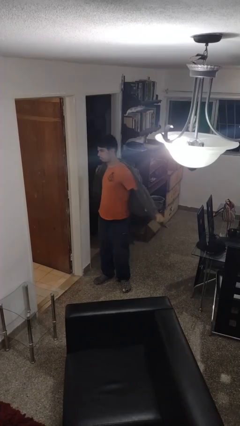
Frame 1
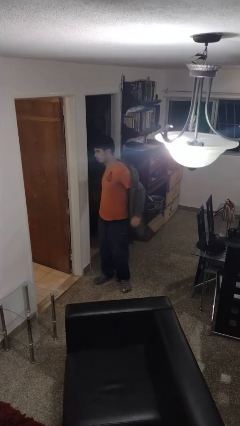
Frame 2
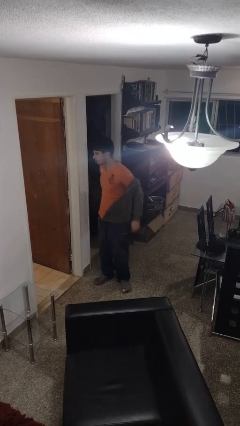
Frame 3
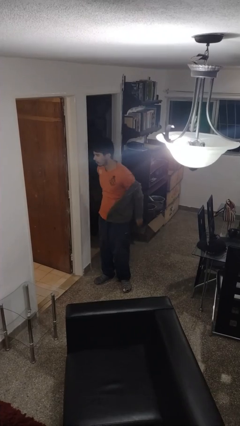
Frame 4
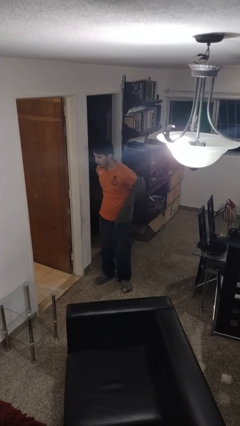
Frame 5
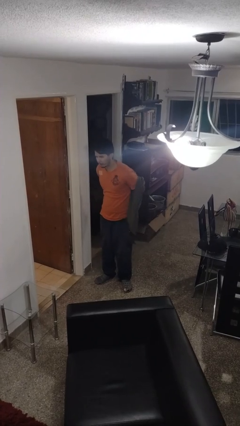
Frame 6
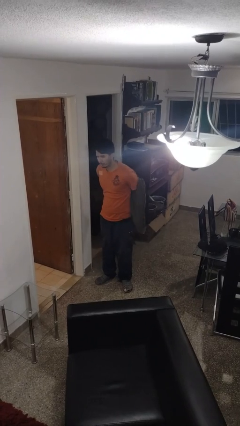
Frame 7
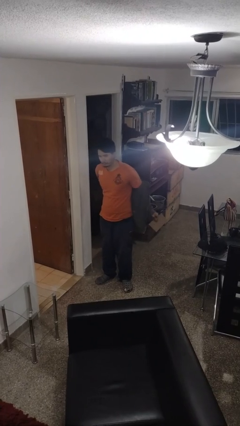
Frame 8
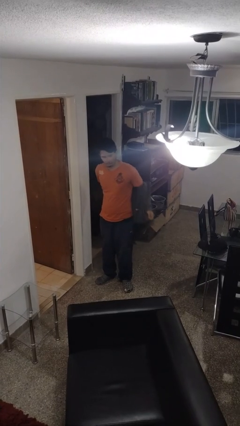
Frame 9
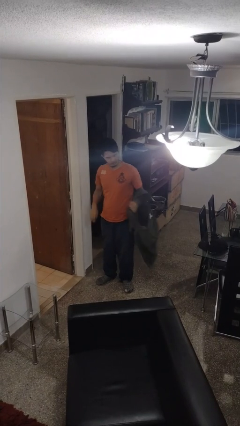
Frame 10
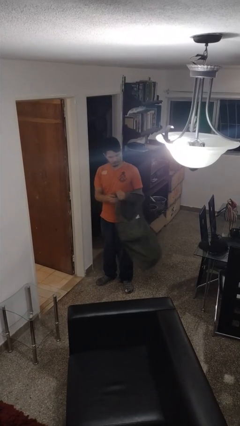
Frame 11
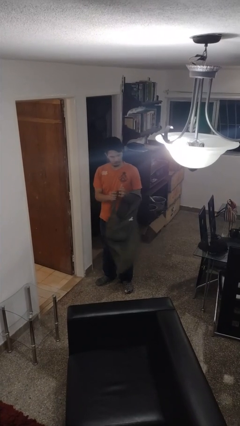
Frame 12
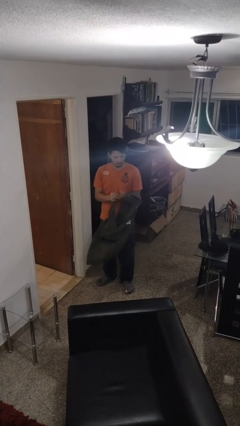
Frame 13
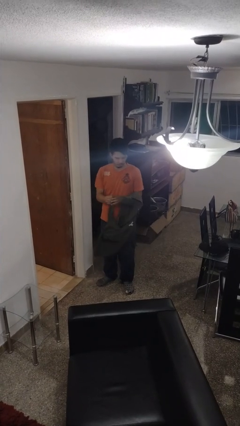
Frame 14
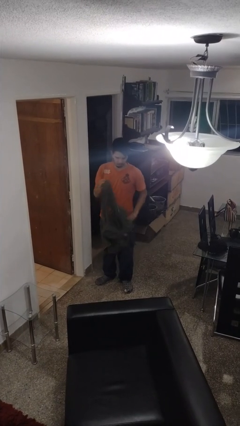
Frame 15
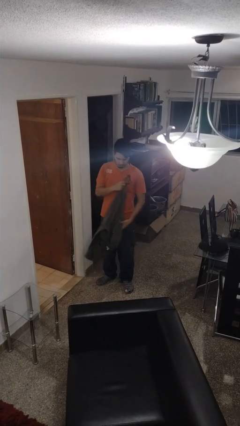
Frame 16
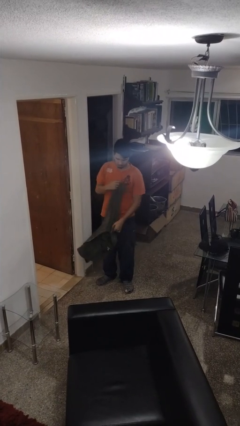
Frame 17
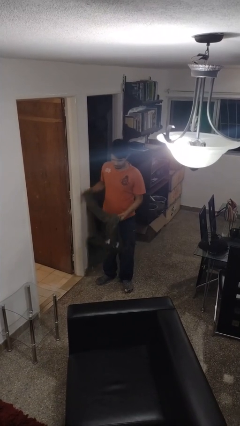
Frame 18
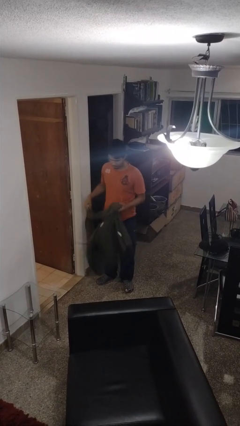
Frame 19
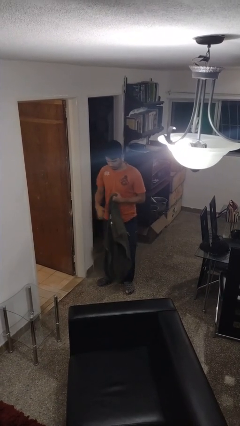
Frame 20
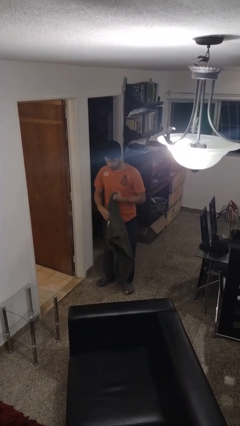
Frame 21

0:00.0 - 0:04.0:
person takes off jacket

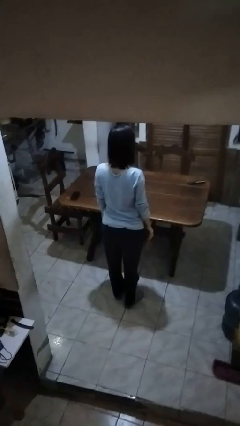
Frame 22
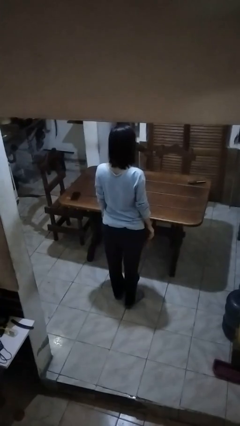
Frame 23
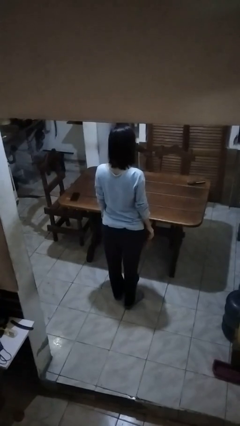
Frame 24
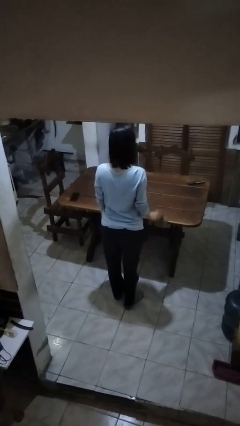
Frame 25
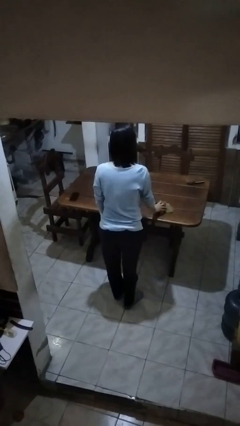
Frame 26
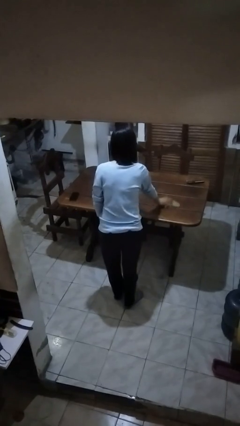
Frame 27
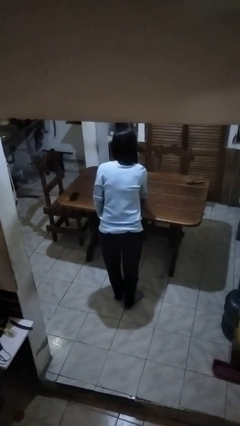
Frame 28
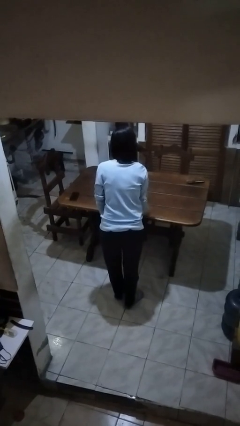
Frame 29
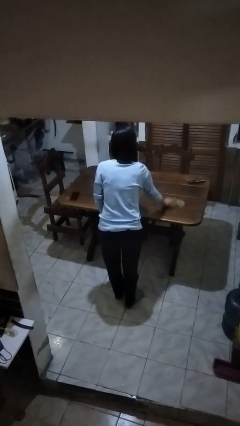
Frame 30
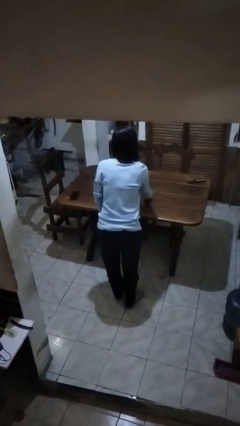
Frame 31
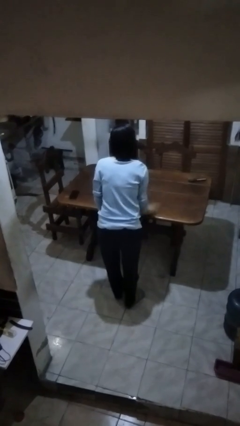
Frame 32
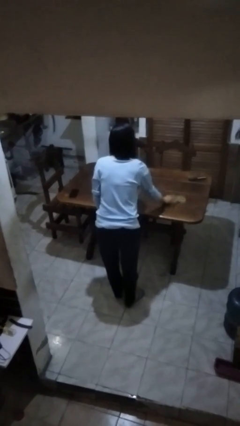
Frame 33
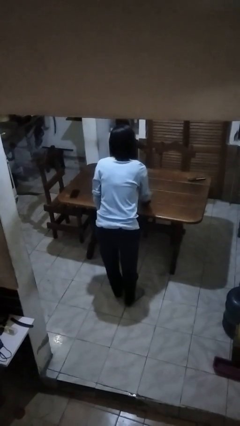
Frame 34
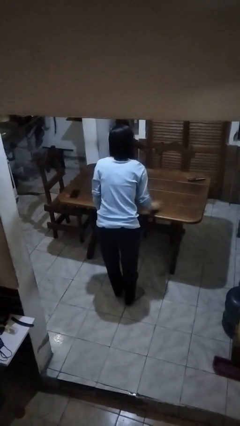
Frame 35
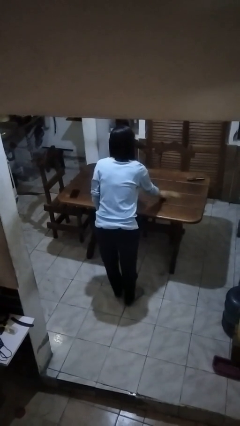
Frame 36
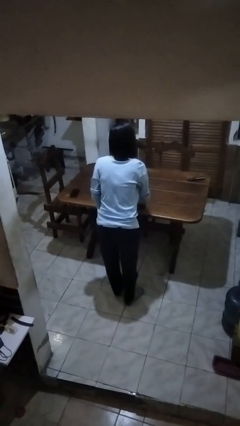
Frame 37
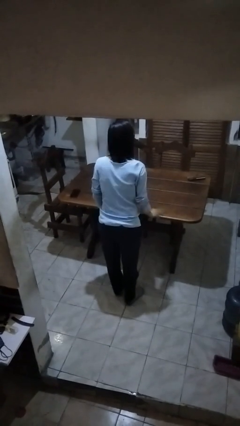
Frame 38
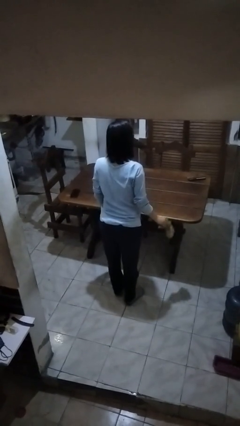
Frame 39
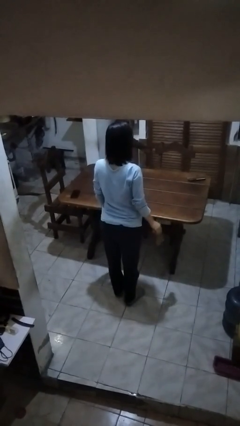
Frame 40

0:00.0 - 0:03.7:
person cleans table with rag

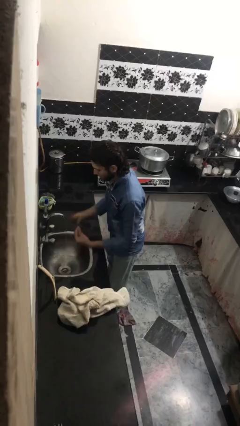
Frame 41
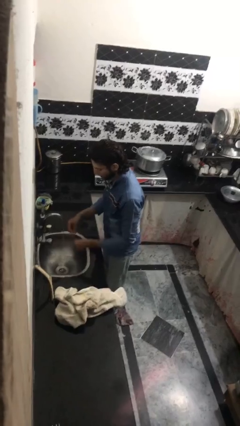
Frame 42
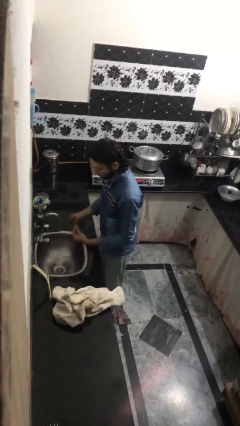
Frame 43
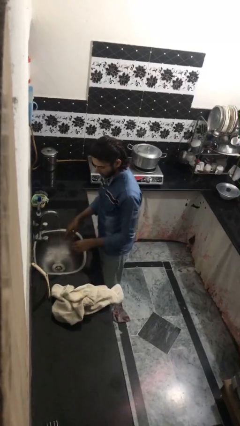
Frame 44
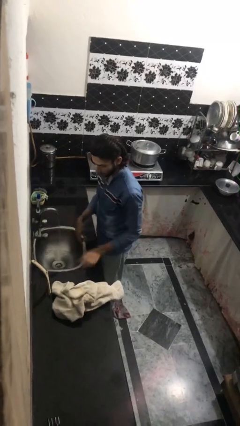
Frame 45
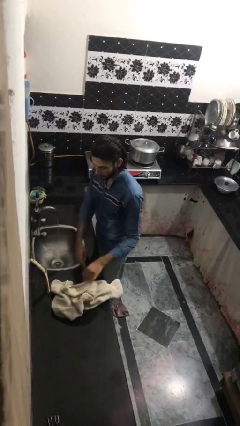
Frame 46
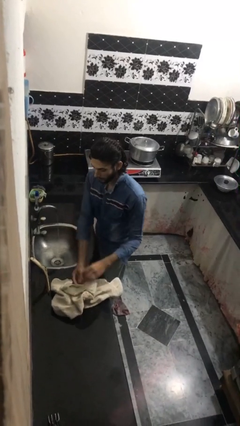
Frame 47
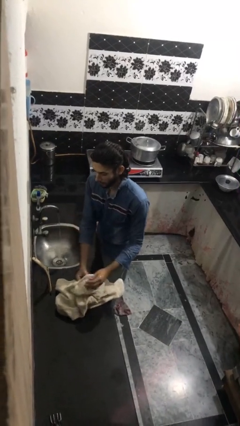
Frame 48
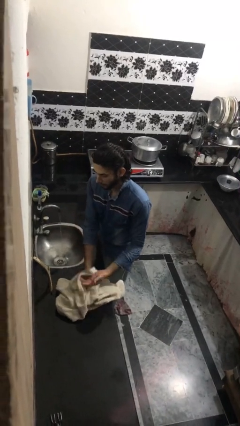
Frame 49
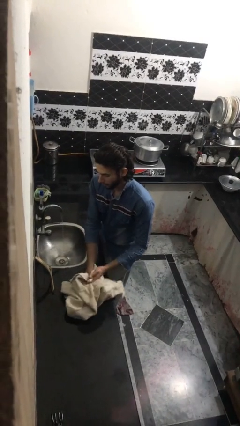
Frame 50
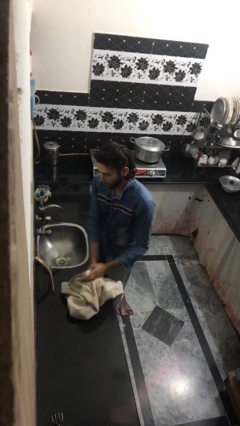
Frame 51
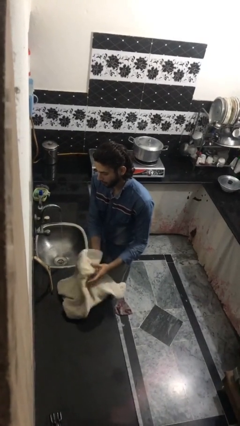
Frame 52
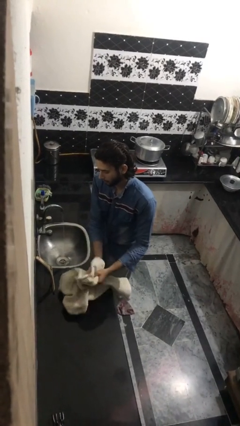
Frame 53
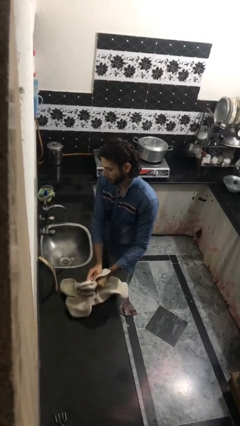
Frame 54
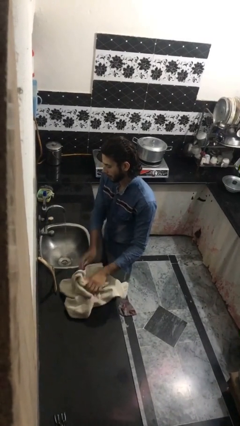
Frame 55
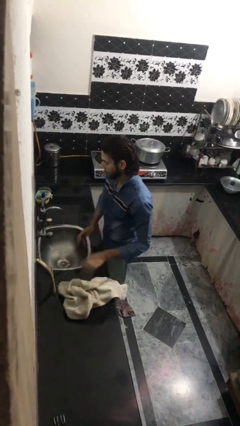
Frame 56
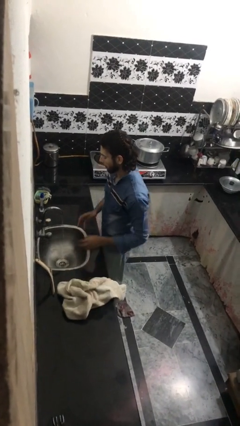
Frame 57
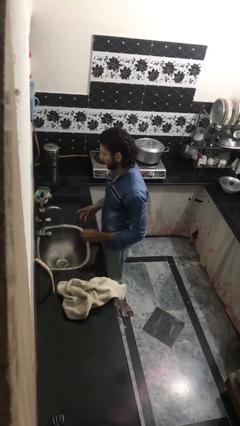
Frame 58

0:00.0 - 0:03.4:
person dries hands with towel

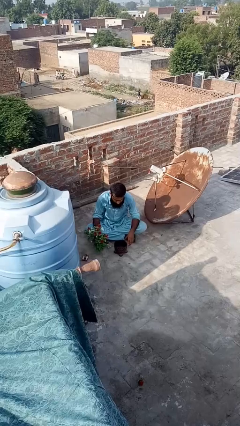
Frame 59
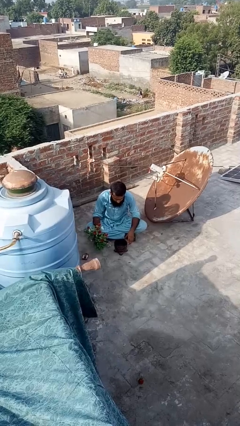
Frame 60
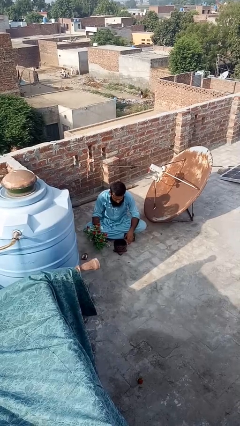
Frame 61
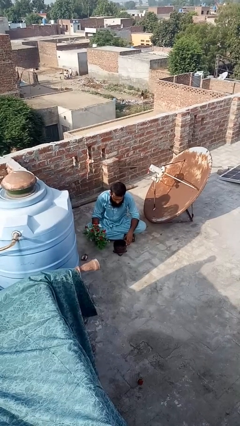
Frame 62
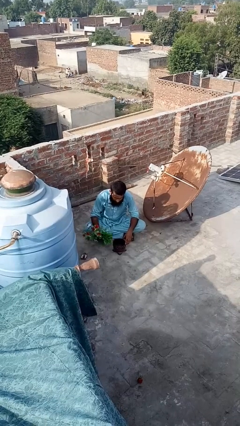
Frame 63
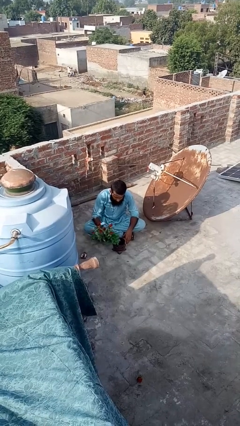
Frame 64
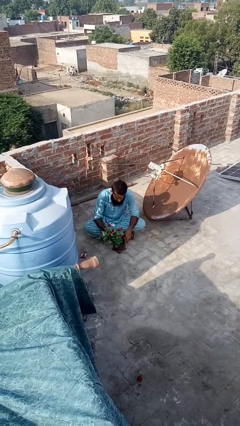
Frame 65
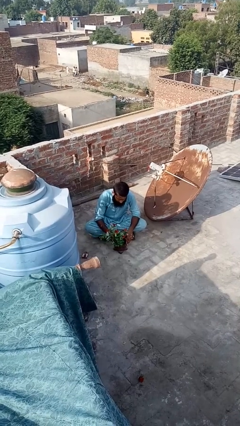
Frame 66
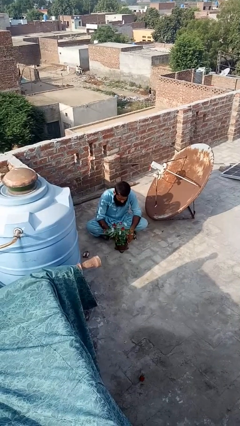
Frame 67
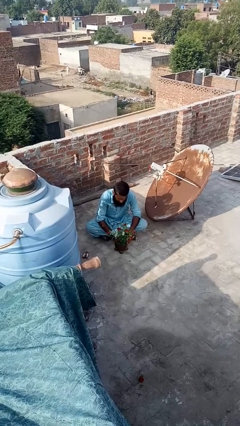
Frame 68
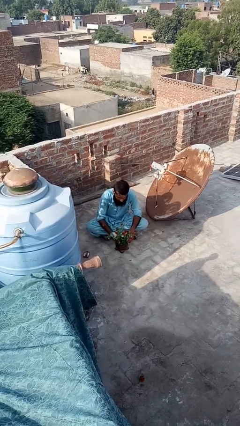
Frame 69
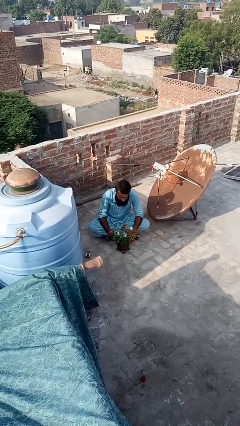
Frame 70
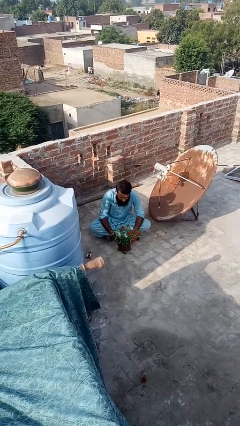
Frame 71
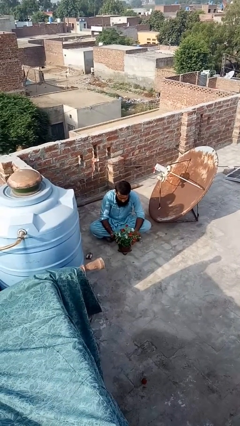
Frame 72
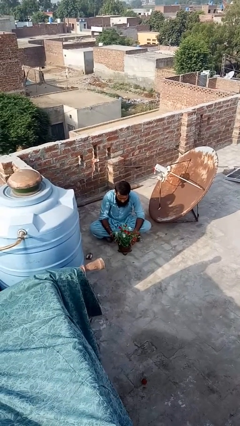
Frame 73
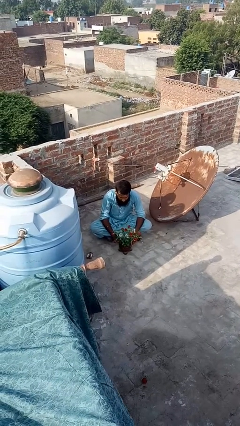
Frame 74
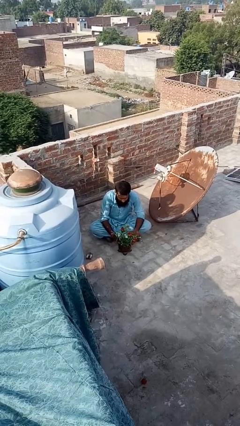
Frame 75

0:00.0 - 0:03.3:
person arranges flowers in vase

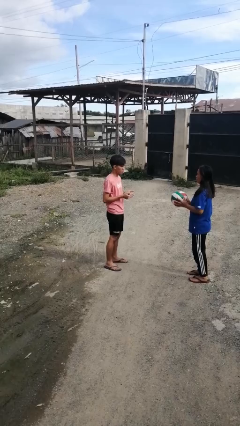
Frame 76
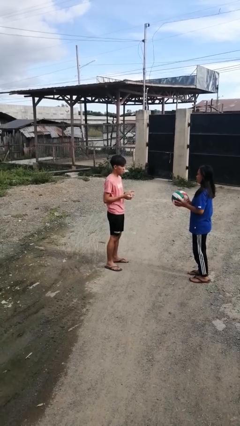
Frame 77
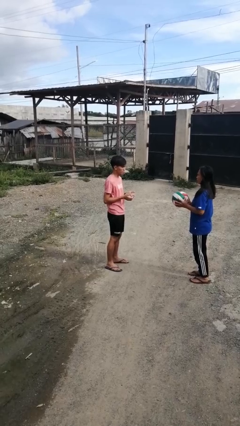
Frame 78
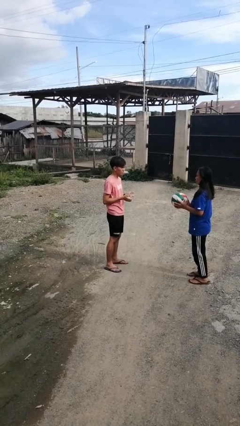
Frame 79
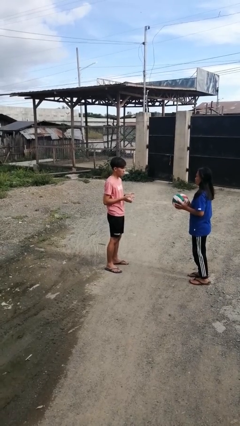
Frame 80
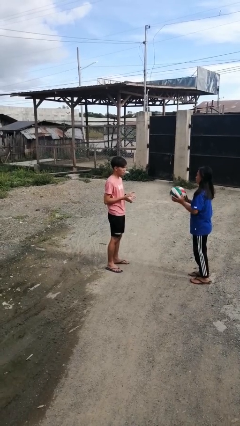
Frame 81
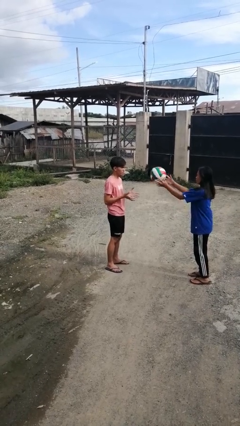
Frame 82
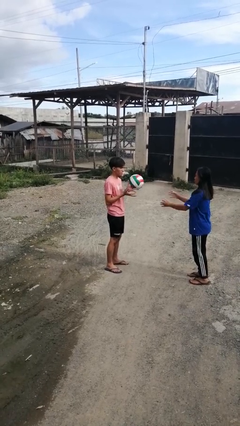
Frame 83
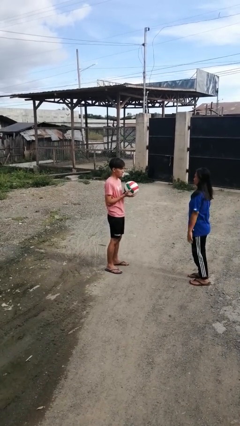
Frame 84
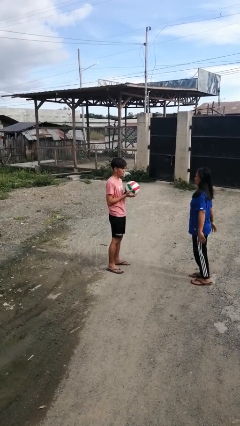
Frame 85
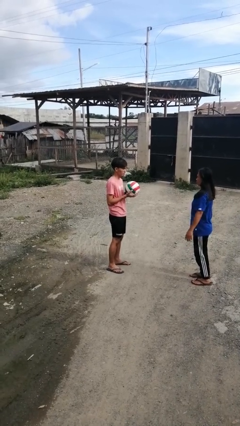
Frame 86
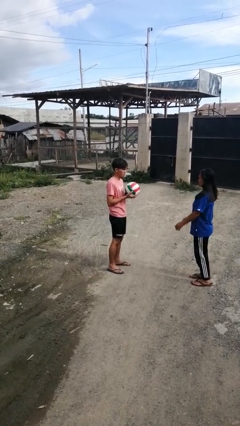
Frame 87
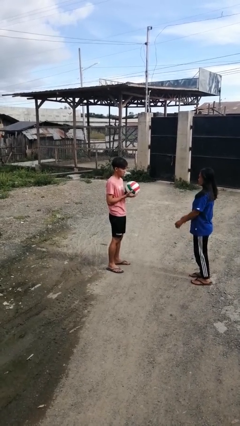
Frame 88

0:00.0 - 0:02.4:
person catches object from person

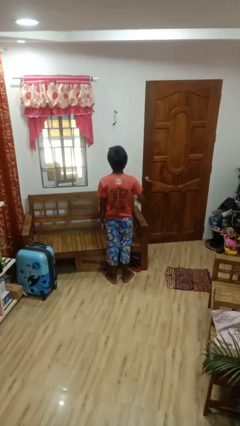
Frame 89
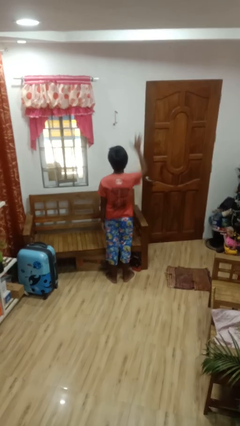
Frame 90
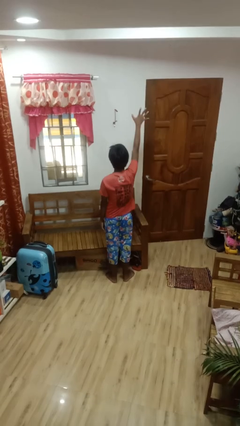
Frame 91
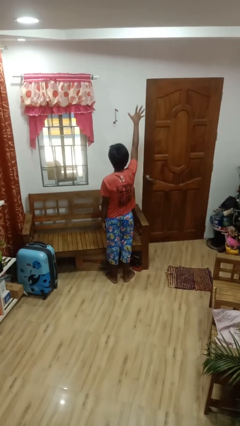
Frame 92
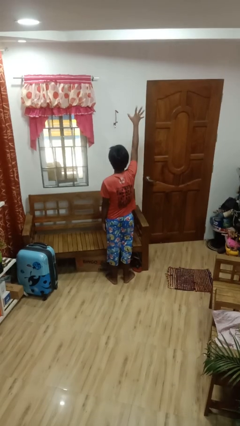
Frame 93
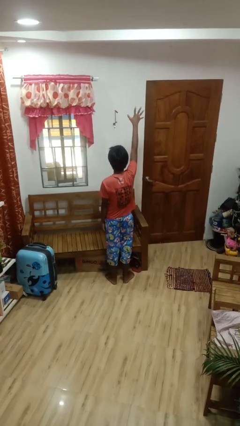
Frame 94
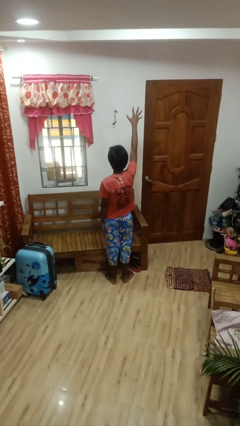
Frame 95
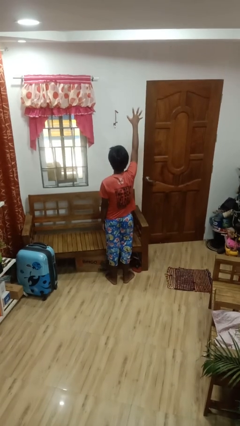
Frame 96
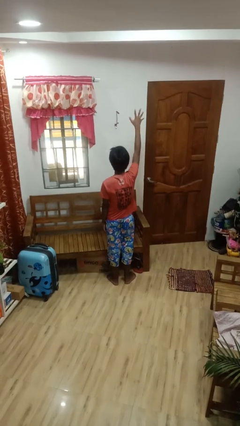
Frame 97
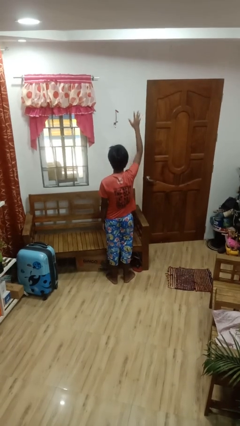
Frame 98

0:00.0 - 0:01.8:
person gestures number five
